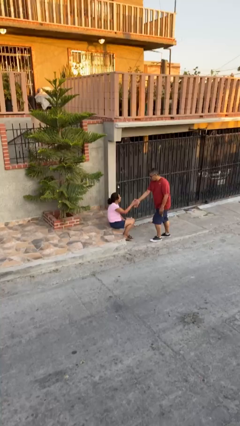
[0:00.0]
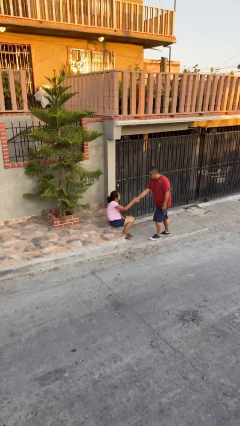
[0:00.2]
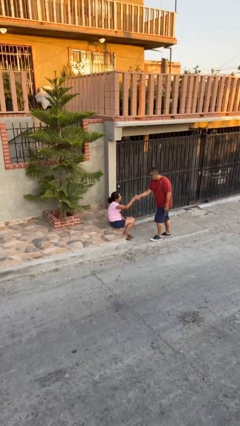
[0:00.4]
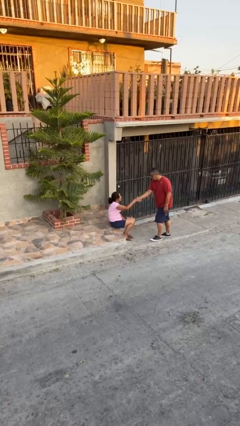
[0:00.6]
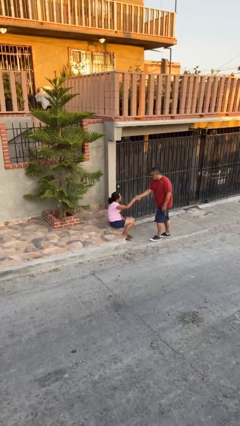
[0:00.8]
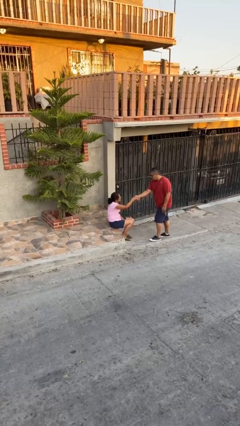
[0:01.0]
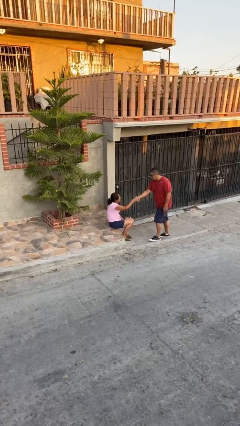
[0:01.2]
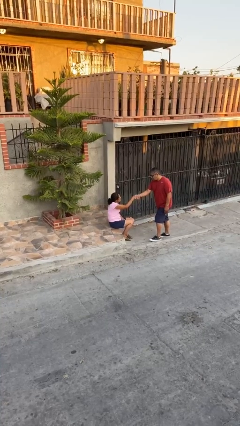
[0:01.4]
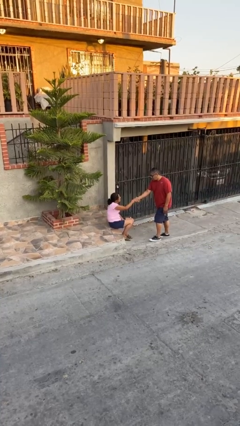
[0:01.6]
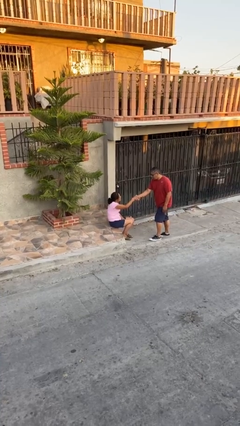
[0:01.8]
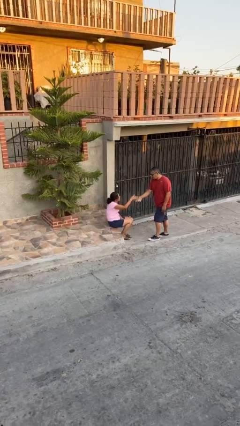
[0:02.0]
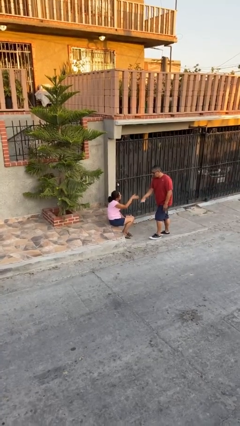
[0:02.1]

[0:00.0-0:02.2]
person shakes hand

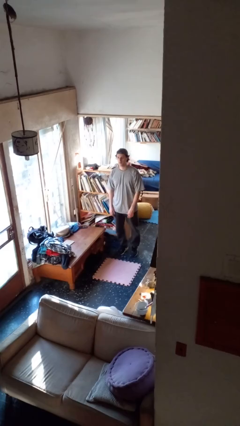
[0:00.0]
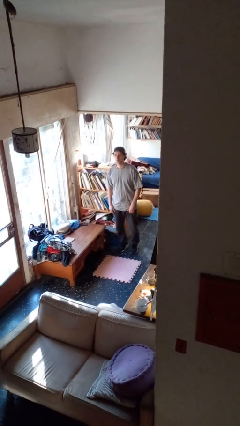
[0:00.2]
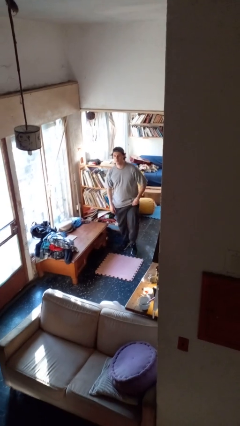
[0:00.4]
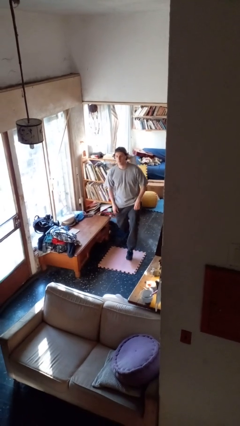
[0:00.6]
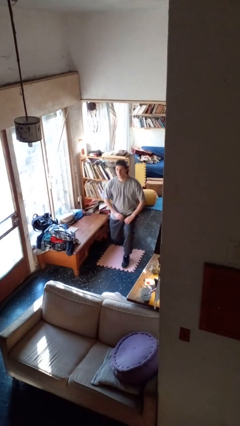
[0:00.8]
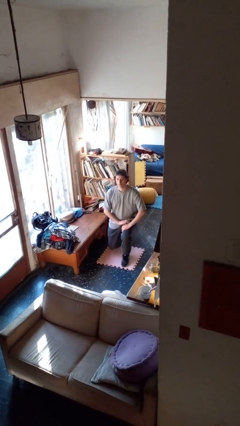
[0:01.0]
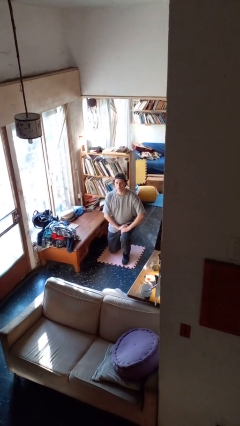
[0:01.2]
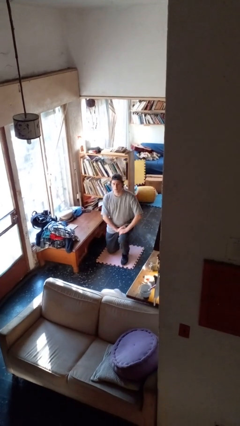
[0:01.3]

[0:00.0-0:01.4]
person kneels

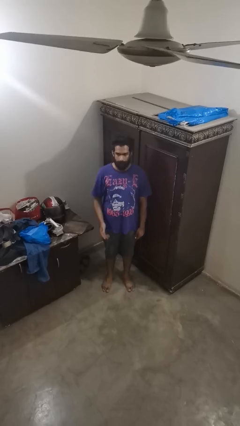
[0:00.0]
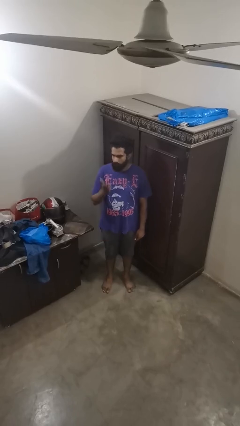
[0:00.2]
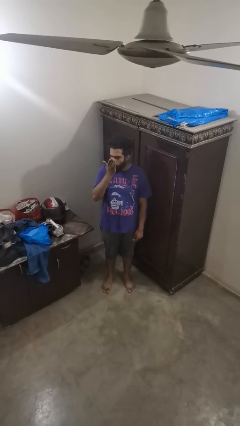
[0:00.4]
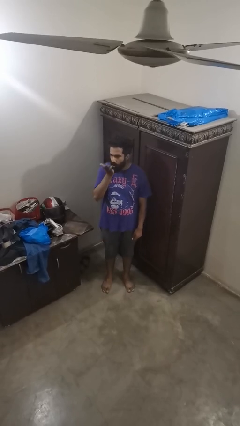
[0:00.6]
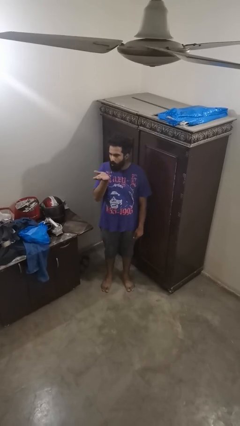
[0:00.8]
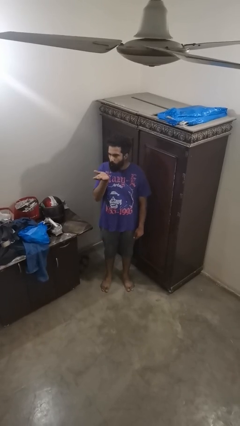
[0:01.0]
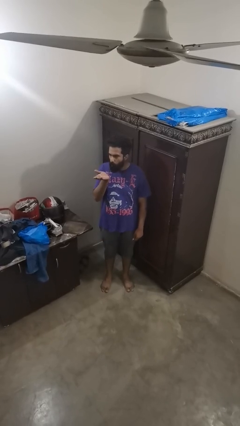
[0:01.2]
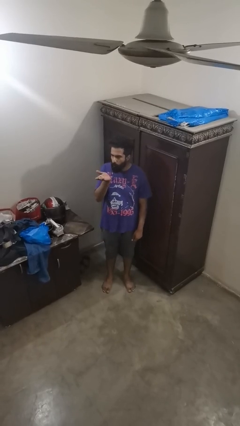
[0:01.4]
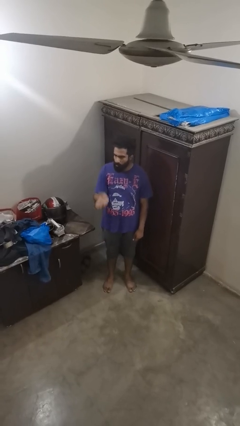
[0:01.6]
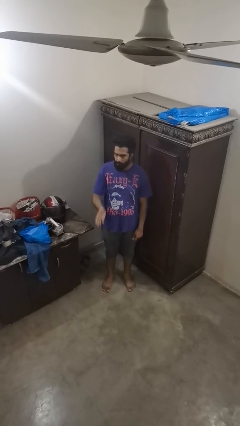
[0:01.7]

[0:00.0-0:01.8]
person gestures blow kiss

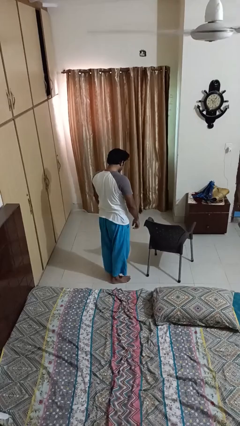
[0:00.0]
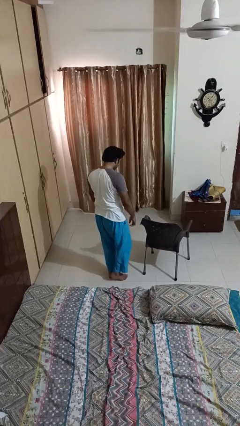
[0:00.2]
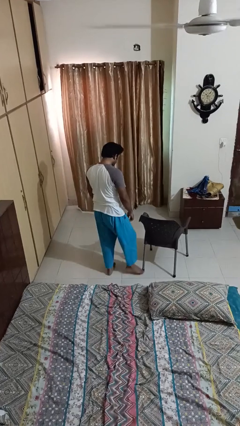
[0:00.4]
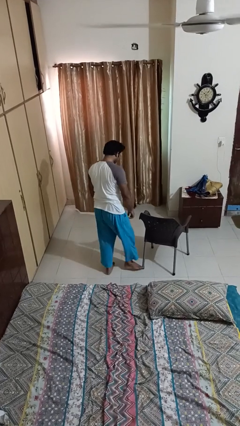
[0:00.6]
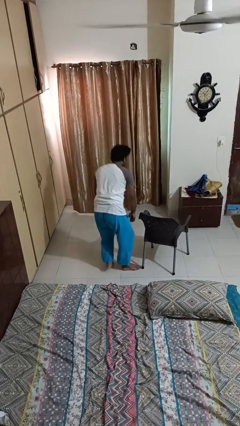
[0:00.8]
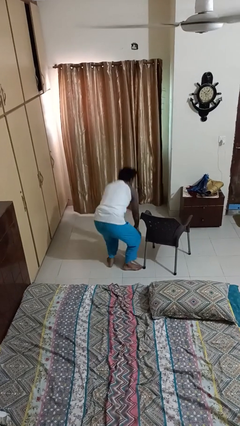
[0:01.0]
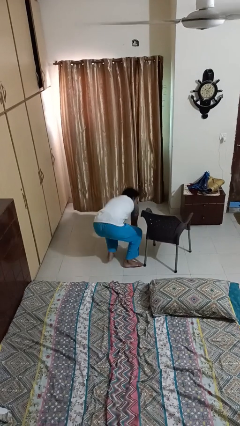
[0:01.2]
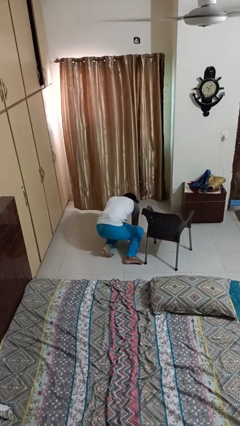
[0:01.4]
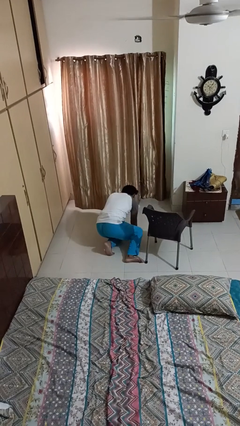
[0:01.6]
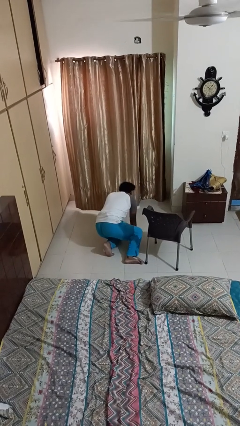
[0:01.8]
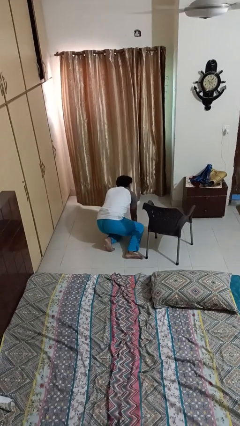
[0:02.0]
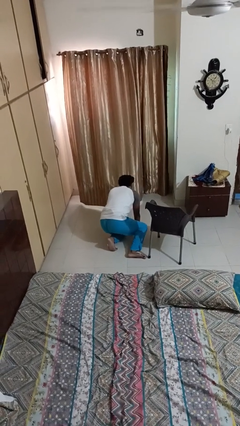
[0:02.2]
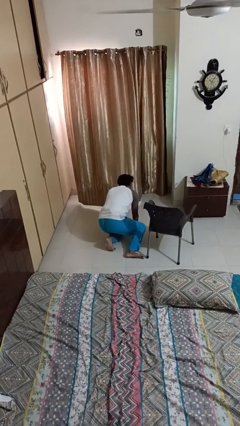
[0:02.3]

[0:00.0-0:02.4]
person trips on object on floor

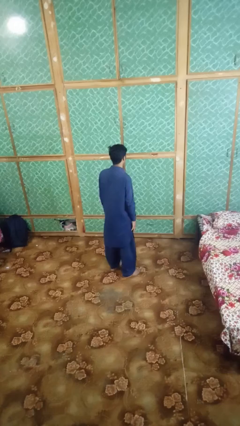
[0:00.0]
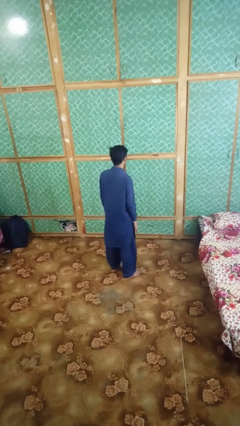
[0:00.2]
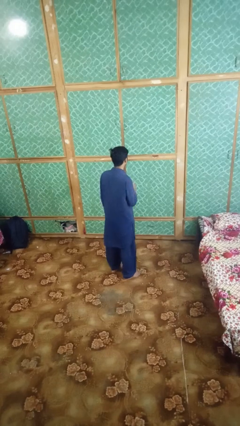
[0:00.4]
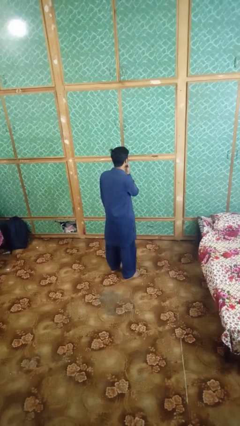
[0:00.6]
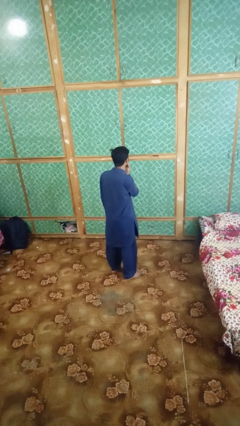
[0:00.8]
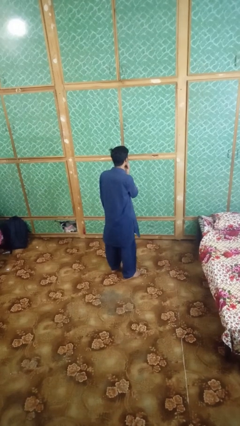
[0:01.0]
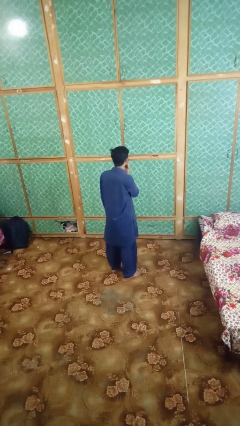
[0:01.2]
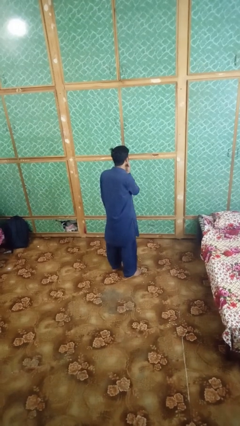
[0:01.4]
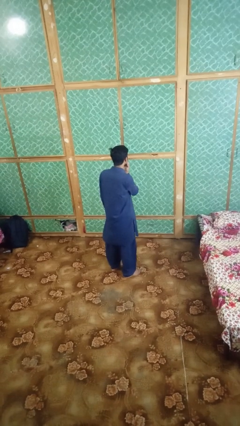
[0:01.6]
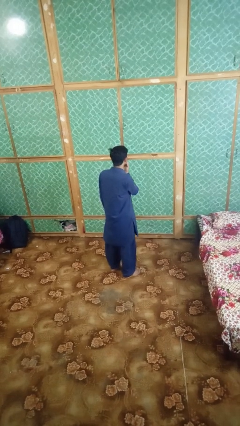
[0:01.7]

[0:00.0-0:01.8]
person strokes chin

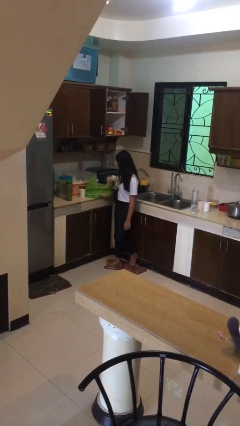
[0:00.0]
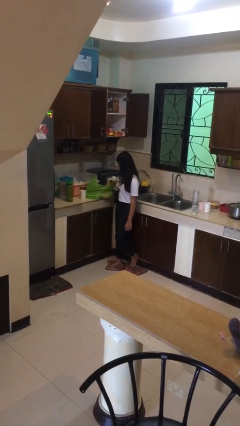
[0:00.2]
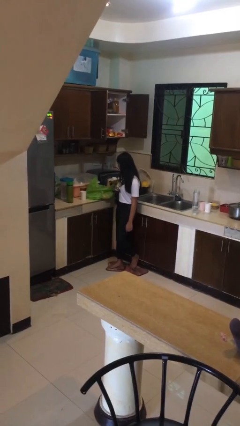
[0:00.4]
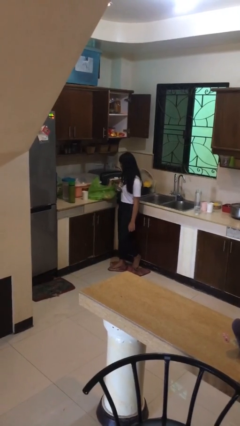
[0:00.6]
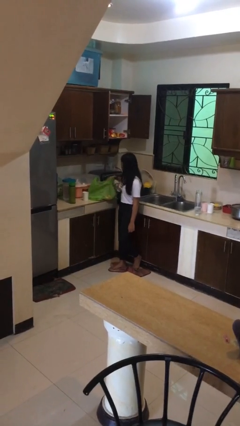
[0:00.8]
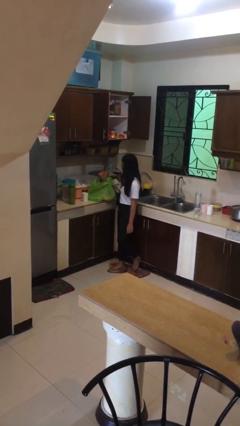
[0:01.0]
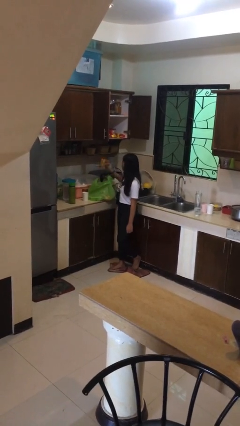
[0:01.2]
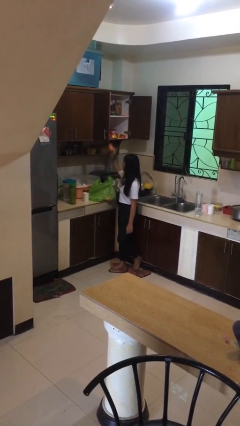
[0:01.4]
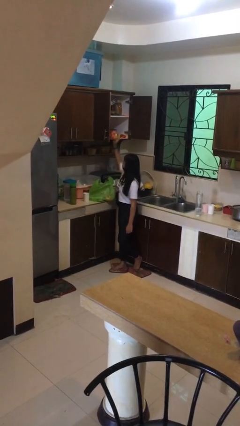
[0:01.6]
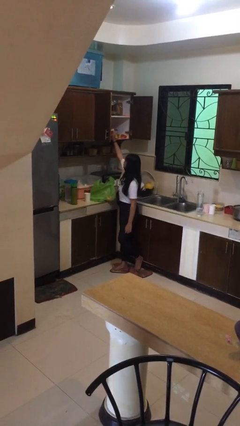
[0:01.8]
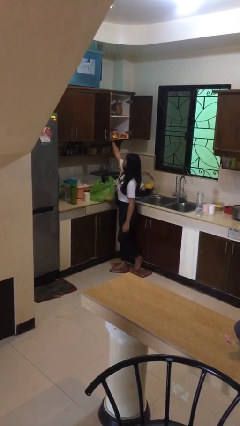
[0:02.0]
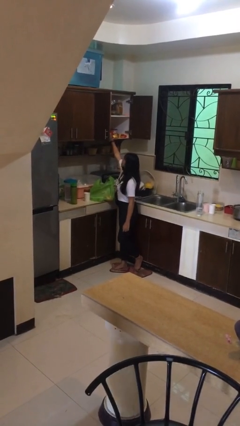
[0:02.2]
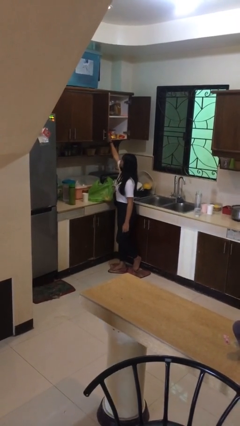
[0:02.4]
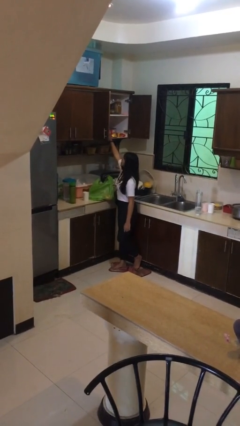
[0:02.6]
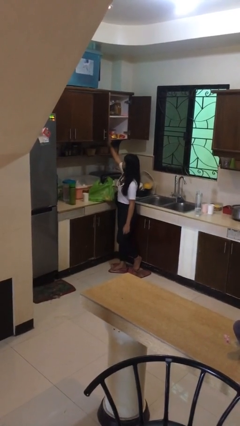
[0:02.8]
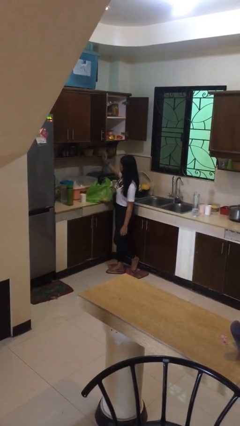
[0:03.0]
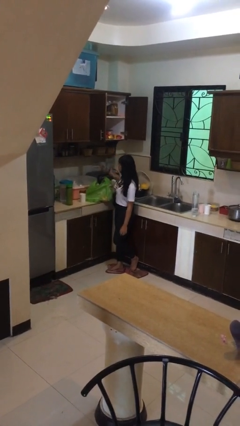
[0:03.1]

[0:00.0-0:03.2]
person loads groceries into cabinet

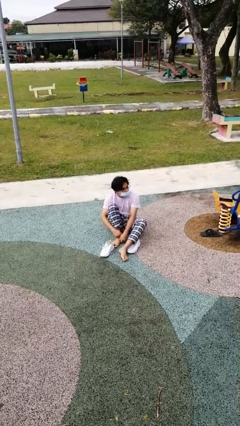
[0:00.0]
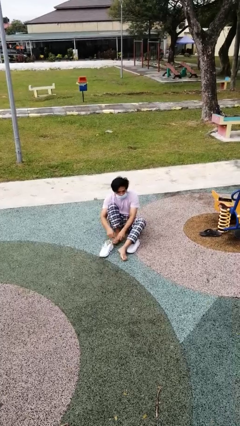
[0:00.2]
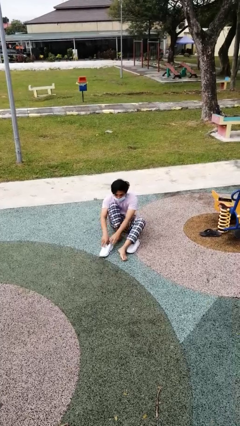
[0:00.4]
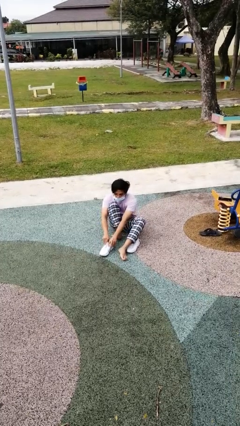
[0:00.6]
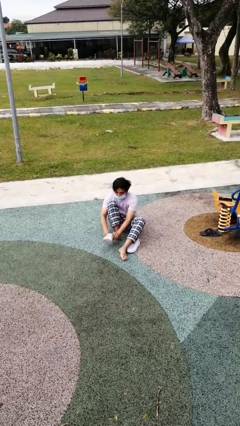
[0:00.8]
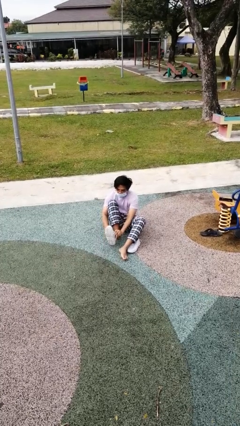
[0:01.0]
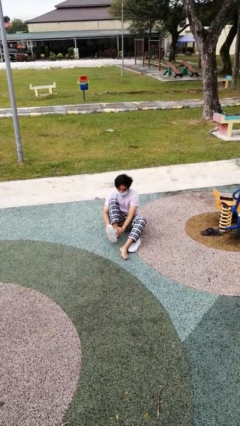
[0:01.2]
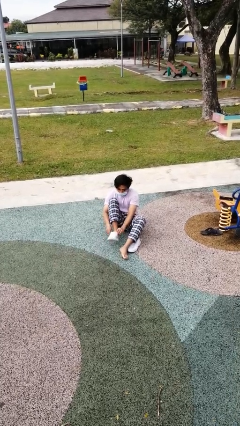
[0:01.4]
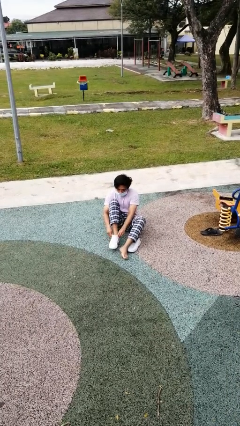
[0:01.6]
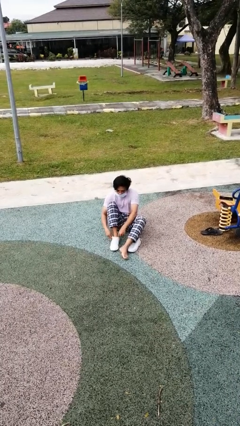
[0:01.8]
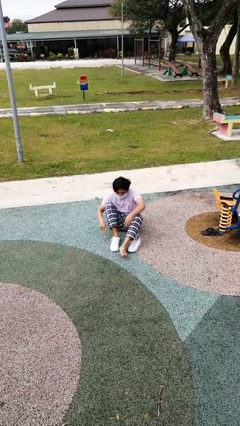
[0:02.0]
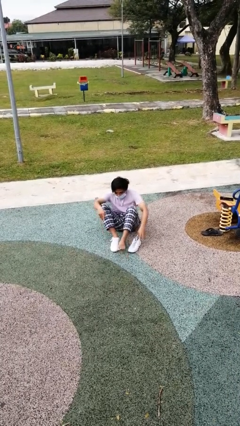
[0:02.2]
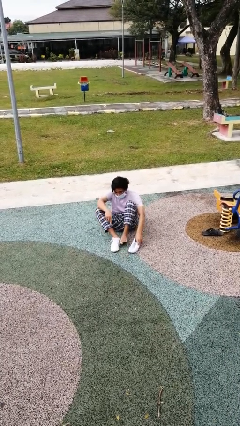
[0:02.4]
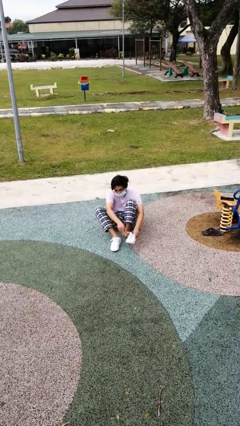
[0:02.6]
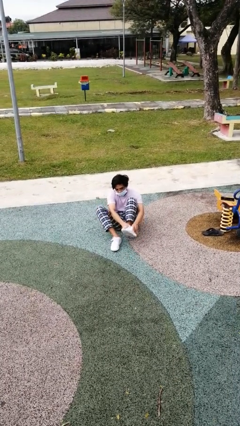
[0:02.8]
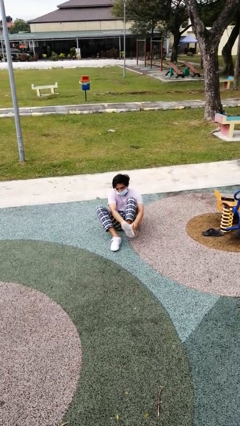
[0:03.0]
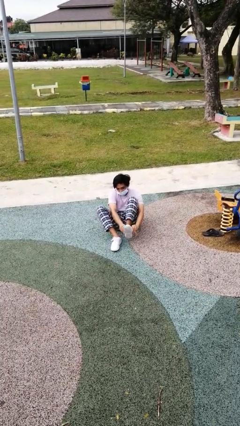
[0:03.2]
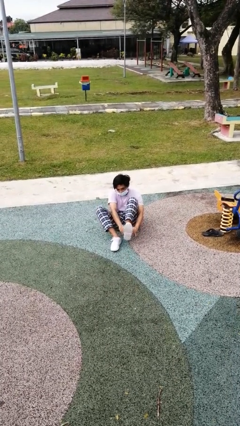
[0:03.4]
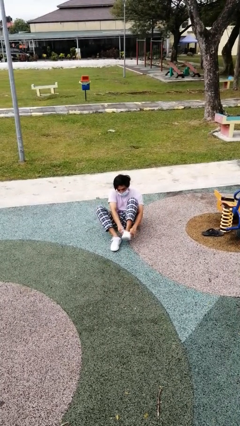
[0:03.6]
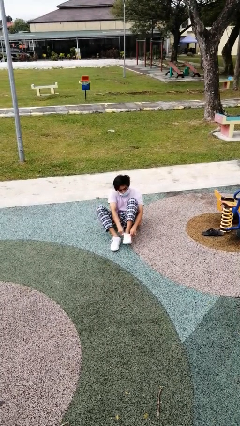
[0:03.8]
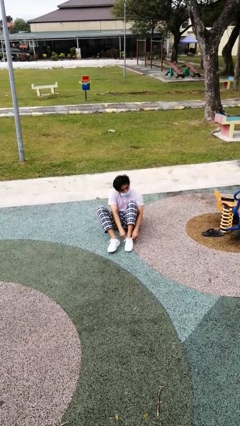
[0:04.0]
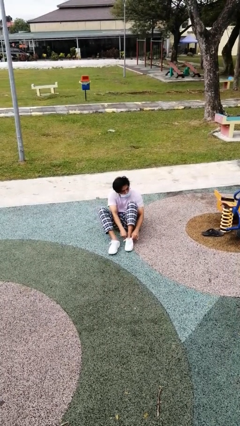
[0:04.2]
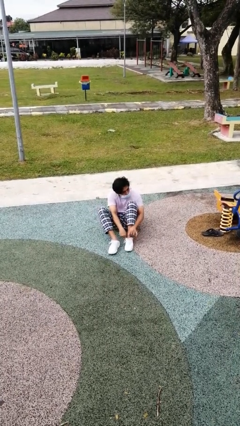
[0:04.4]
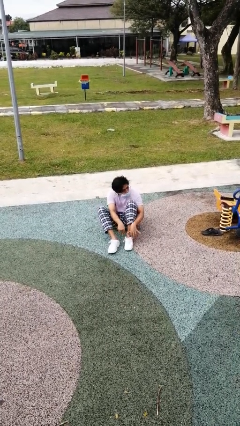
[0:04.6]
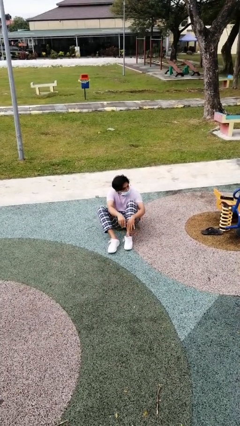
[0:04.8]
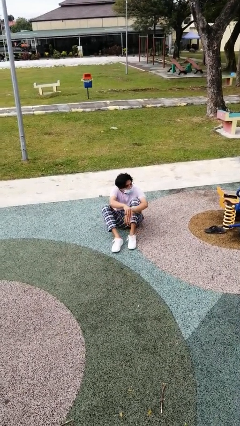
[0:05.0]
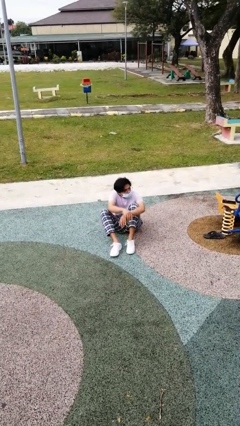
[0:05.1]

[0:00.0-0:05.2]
person puts on shoes
